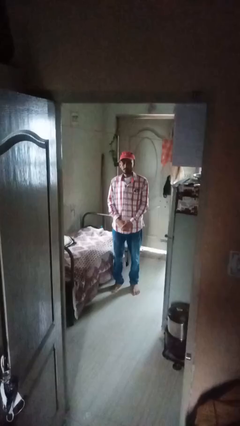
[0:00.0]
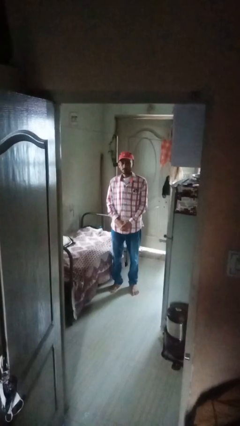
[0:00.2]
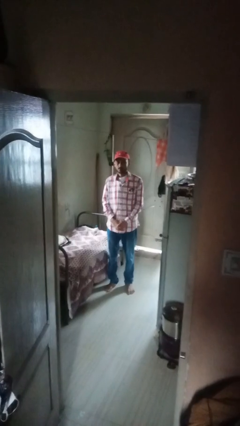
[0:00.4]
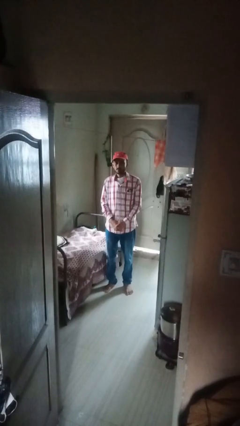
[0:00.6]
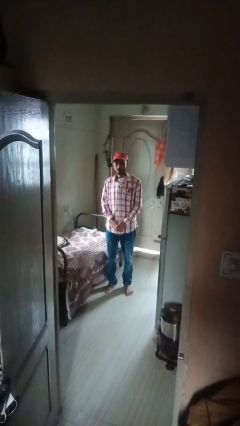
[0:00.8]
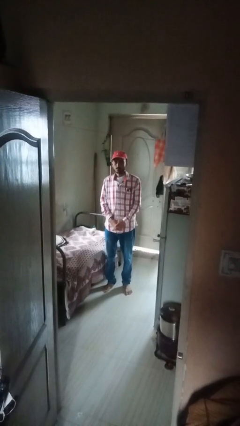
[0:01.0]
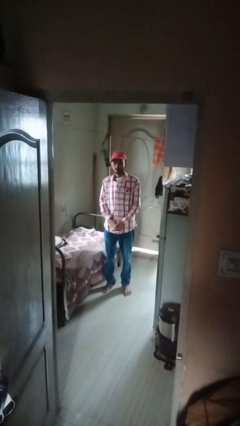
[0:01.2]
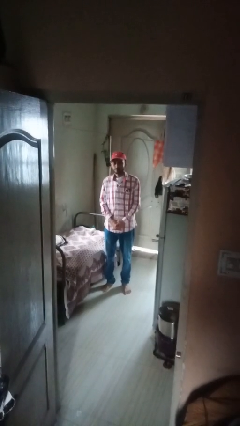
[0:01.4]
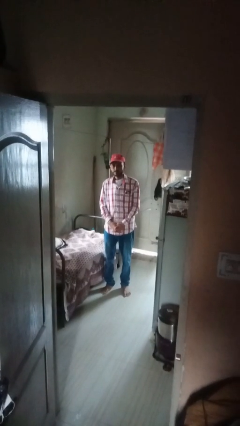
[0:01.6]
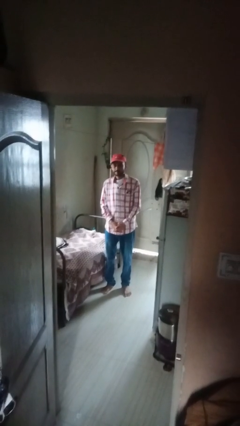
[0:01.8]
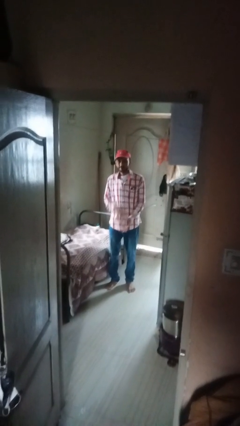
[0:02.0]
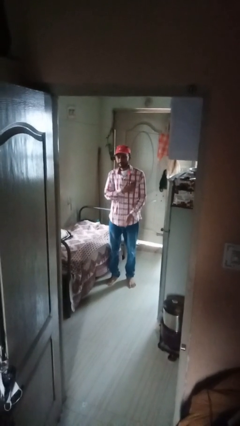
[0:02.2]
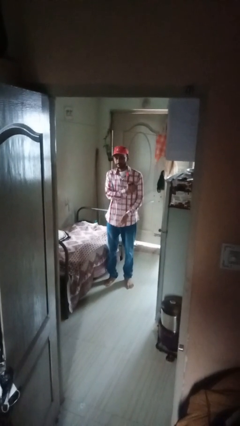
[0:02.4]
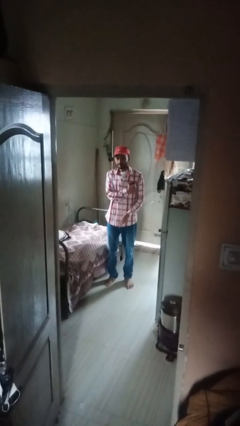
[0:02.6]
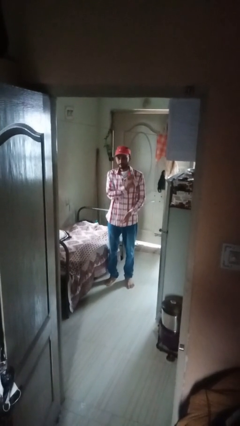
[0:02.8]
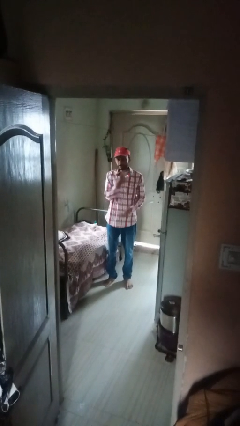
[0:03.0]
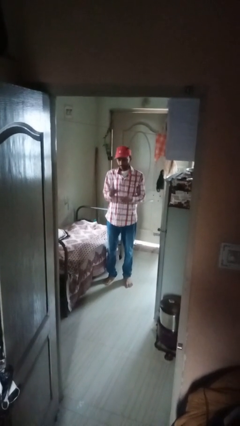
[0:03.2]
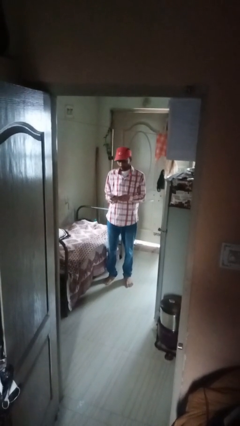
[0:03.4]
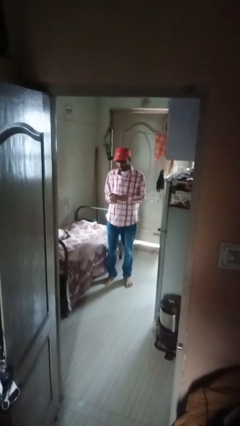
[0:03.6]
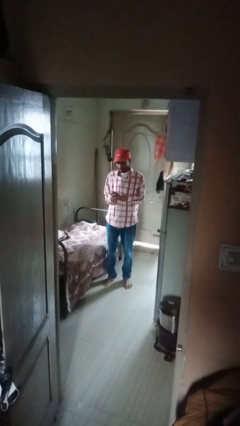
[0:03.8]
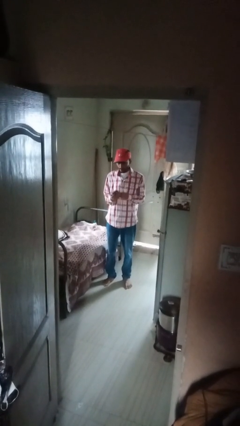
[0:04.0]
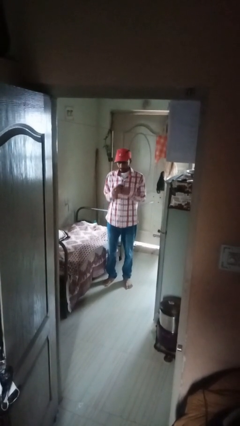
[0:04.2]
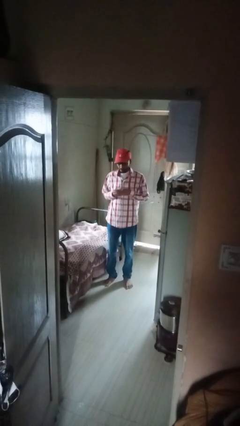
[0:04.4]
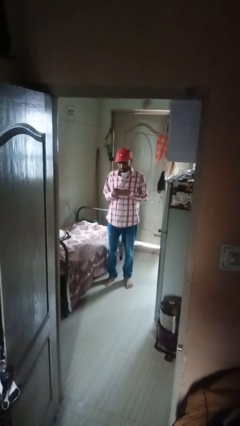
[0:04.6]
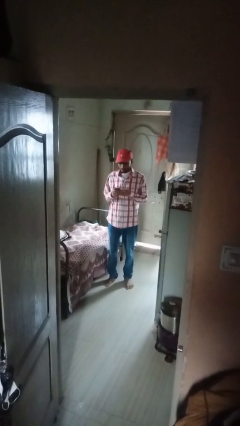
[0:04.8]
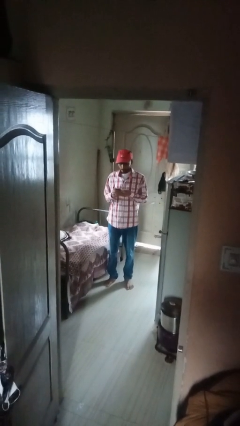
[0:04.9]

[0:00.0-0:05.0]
person takes phone from pocket

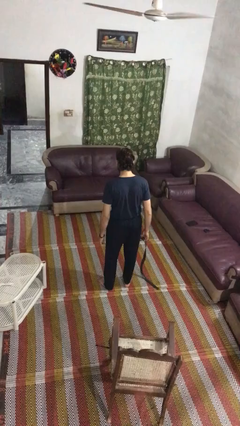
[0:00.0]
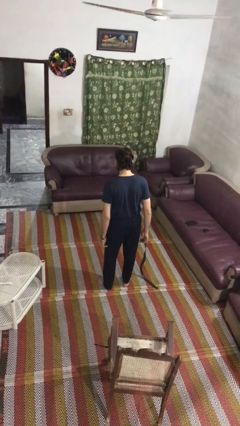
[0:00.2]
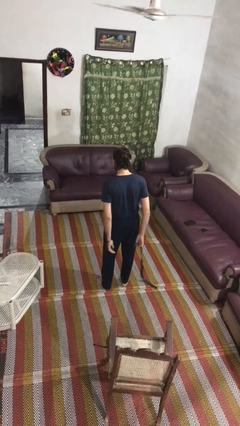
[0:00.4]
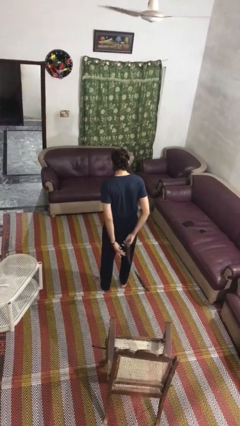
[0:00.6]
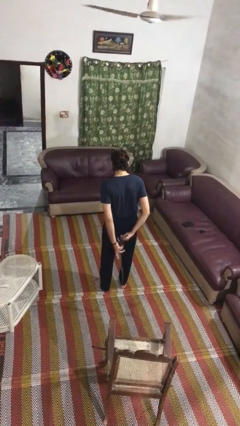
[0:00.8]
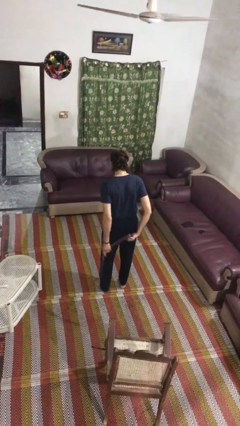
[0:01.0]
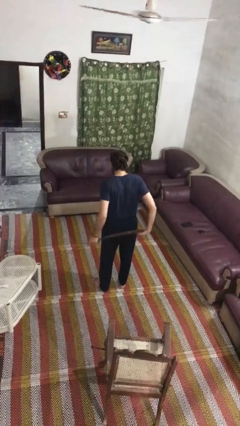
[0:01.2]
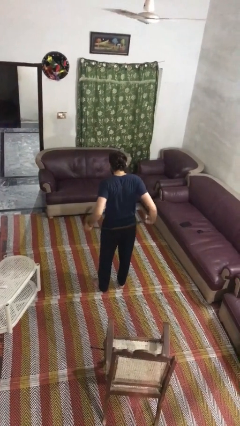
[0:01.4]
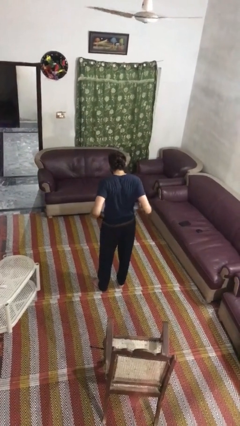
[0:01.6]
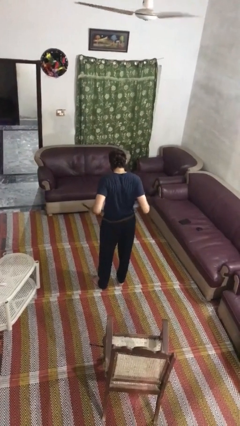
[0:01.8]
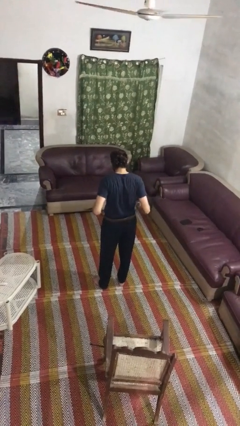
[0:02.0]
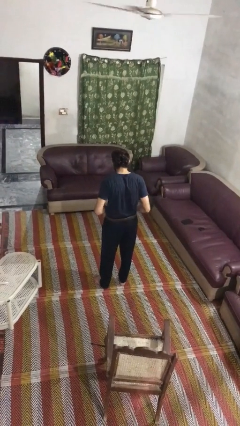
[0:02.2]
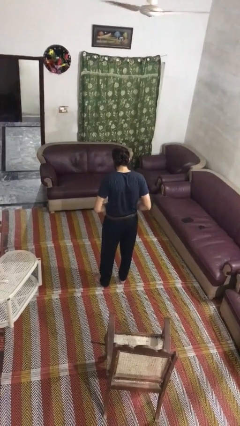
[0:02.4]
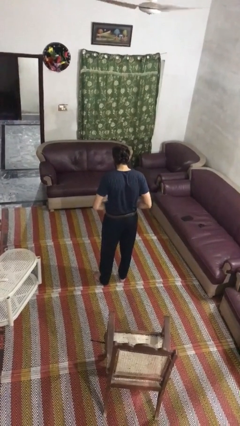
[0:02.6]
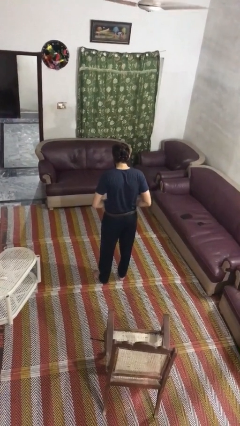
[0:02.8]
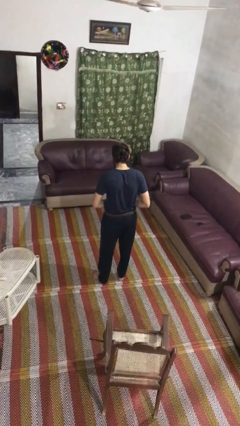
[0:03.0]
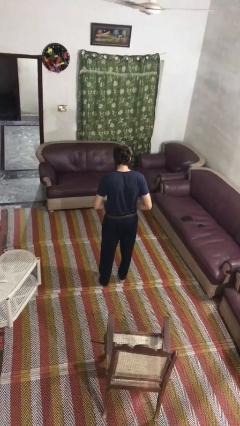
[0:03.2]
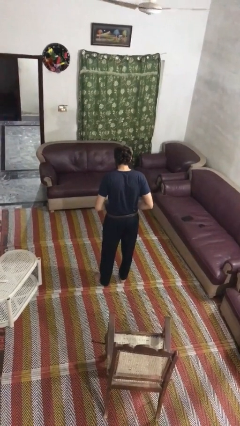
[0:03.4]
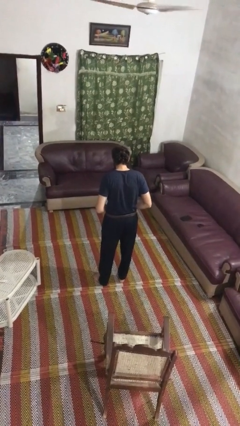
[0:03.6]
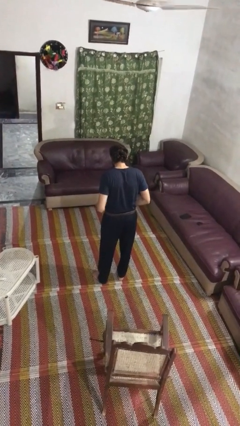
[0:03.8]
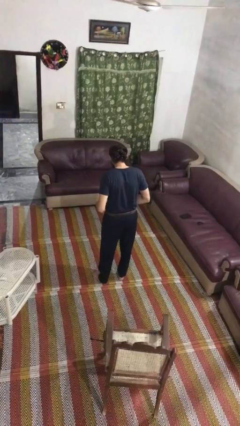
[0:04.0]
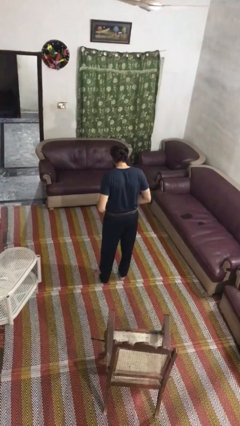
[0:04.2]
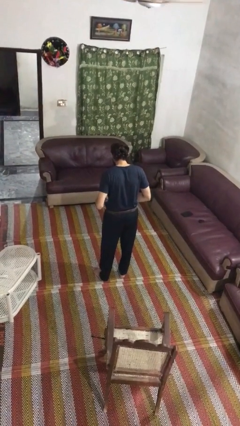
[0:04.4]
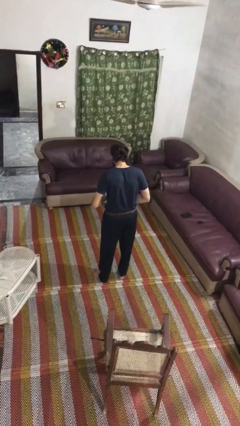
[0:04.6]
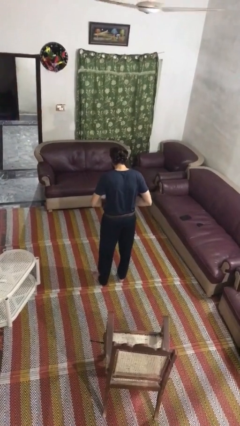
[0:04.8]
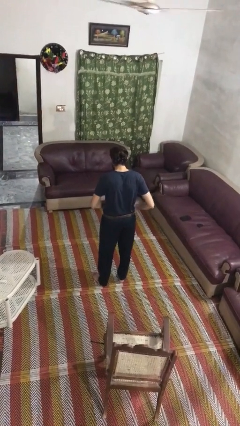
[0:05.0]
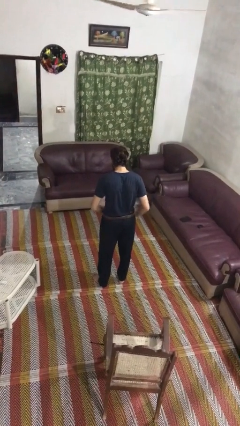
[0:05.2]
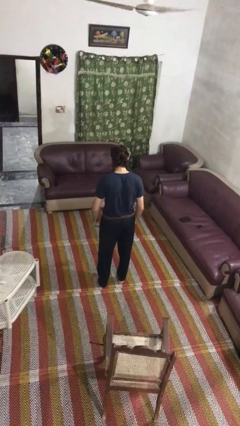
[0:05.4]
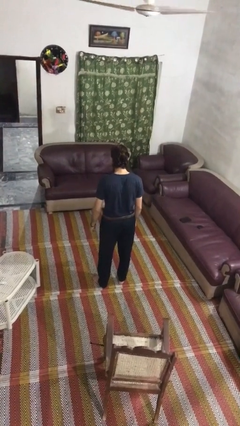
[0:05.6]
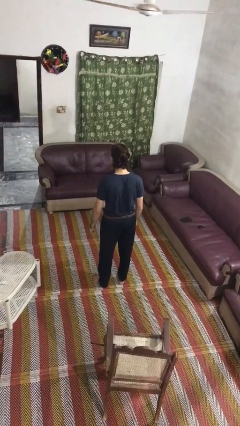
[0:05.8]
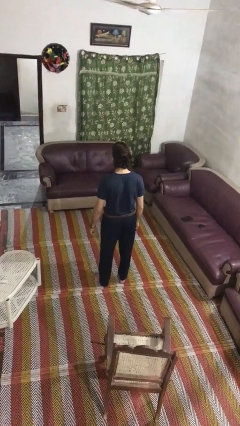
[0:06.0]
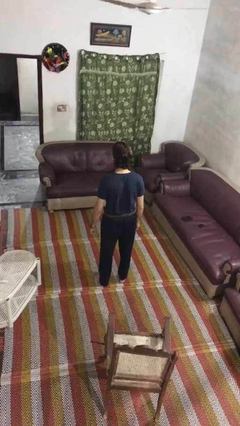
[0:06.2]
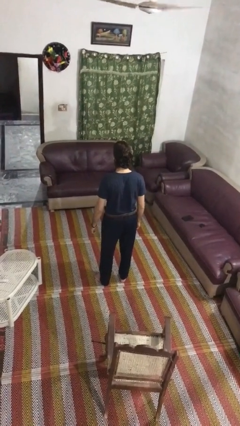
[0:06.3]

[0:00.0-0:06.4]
person puts on belt

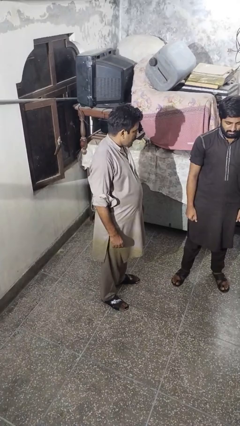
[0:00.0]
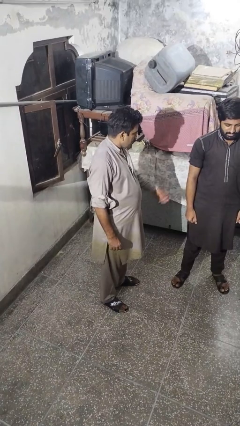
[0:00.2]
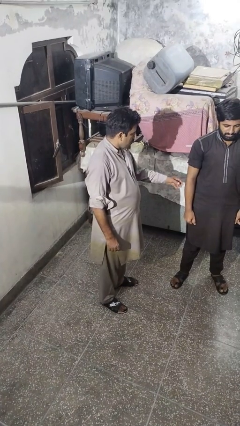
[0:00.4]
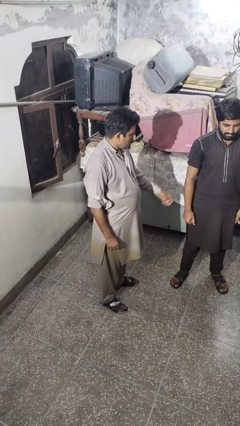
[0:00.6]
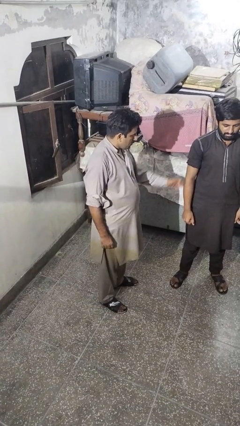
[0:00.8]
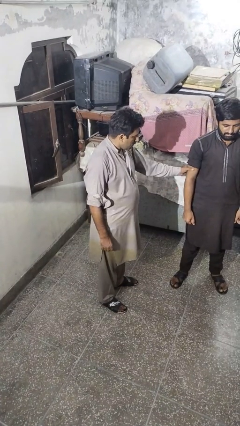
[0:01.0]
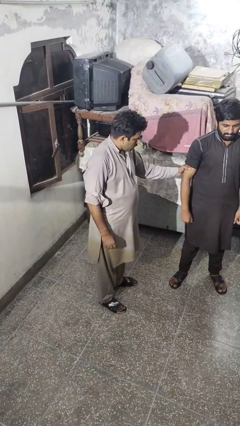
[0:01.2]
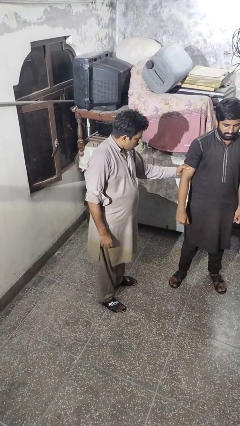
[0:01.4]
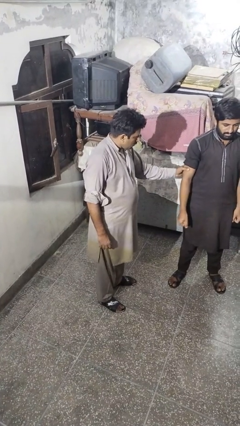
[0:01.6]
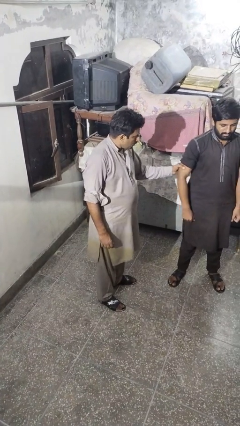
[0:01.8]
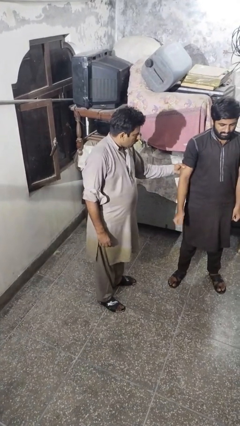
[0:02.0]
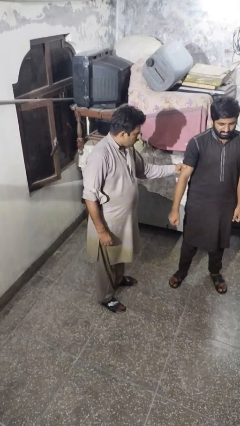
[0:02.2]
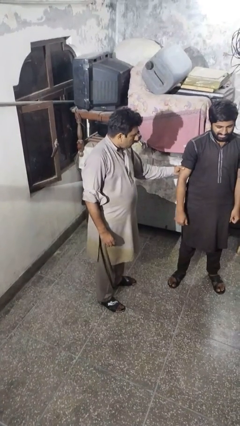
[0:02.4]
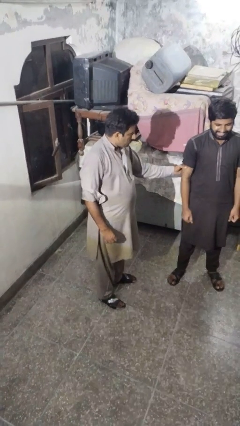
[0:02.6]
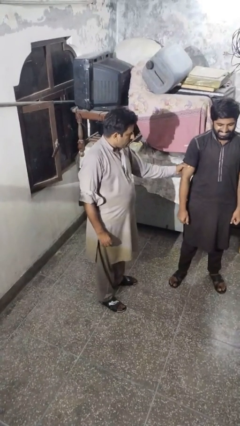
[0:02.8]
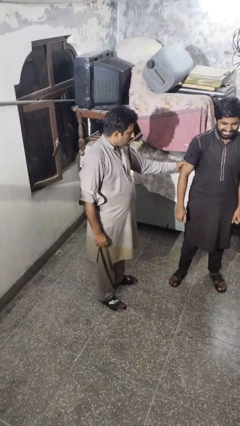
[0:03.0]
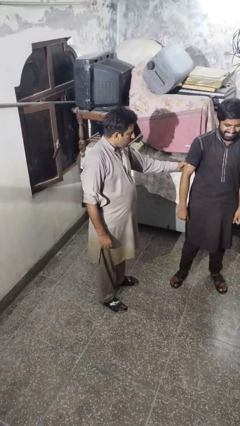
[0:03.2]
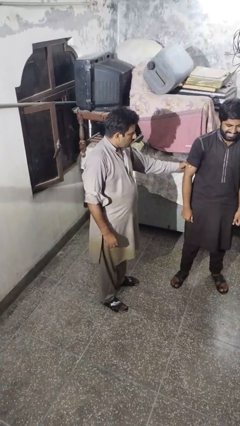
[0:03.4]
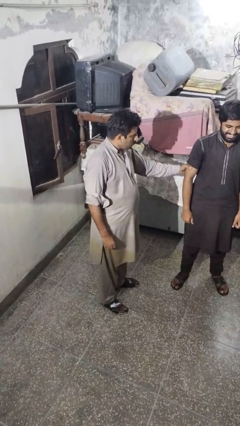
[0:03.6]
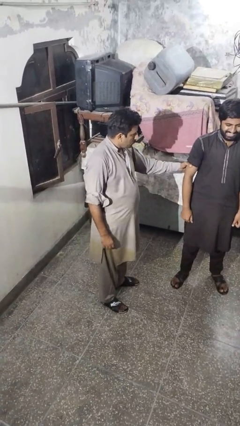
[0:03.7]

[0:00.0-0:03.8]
person grabs person by bicep

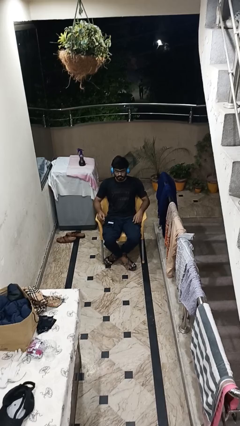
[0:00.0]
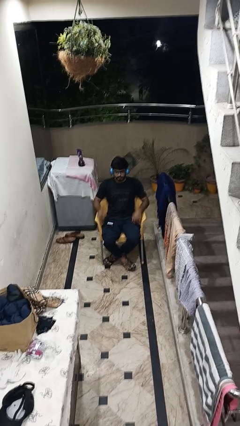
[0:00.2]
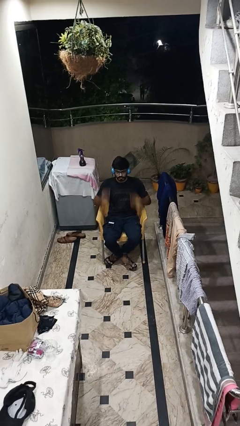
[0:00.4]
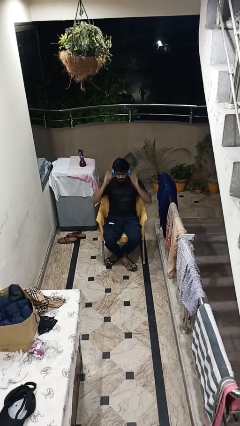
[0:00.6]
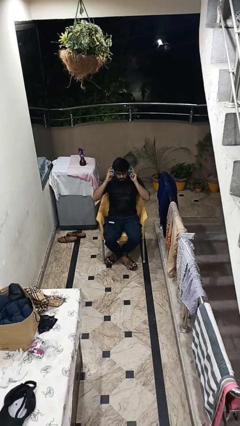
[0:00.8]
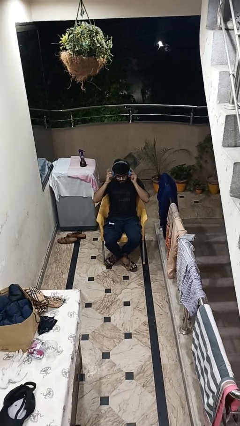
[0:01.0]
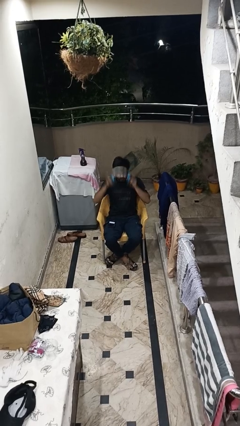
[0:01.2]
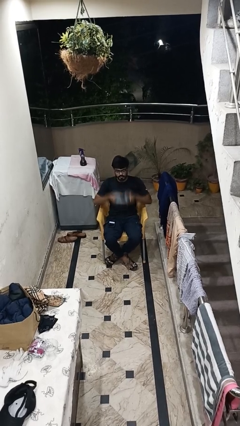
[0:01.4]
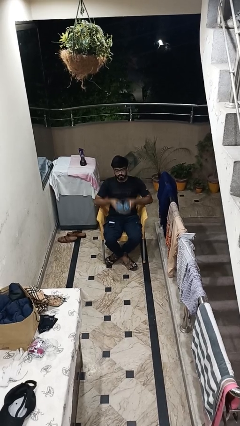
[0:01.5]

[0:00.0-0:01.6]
person takes off headphones

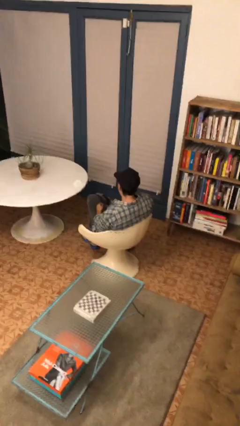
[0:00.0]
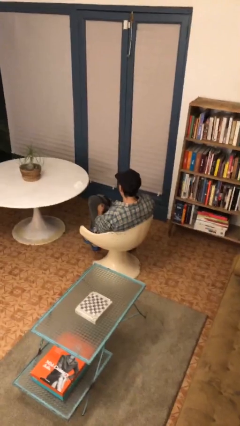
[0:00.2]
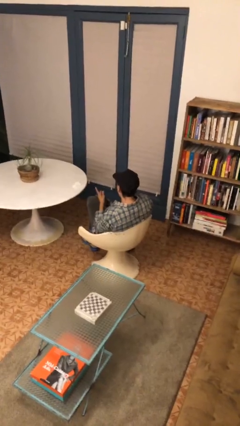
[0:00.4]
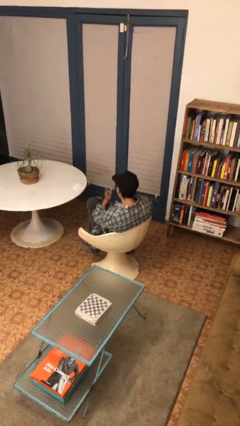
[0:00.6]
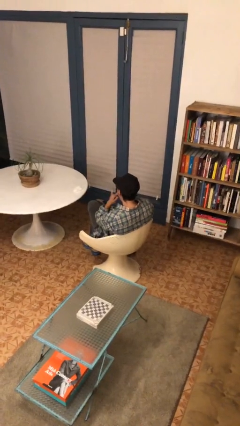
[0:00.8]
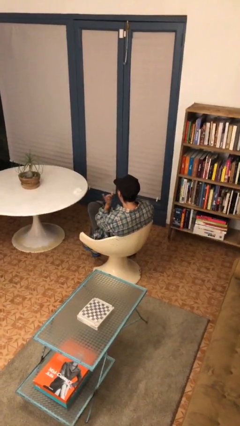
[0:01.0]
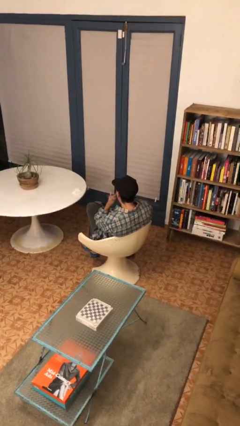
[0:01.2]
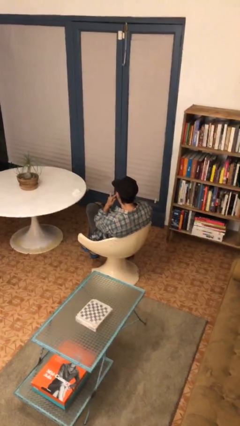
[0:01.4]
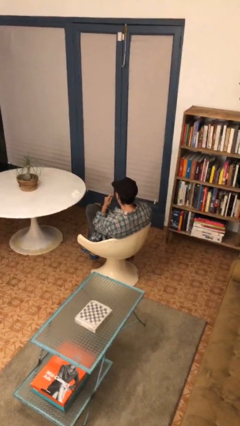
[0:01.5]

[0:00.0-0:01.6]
person gestures listen closely
